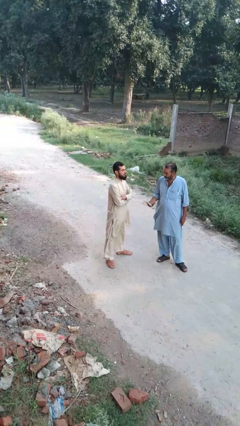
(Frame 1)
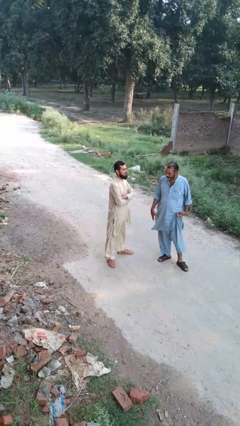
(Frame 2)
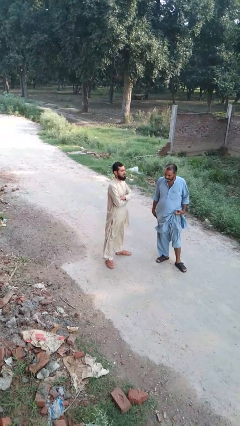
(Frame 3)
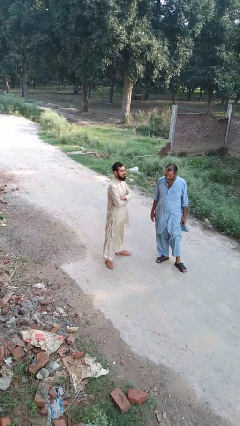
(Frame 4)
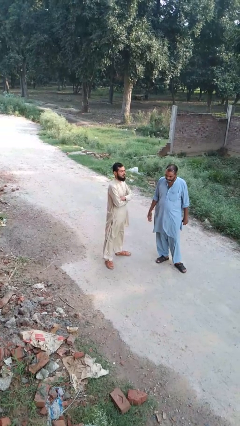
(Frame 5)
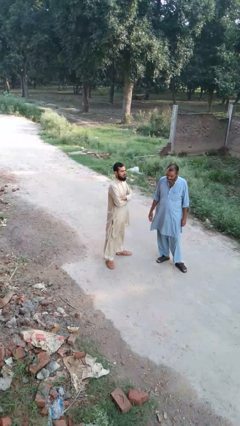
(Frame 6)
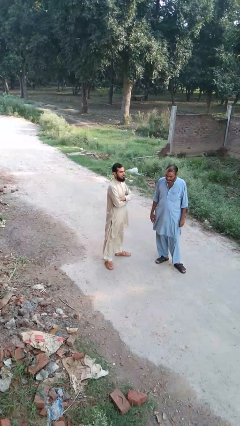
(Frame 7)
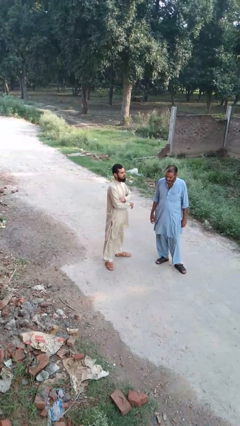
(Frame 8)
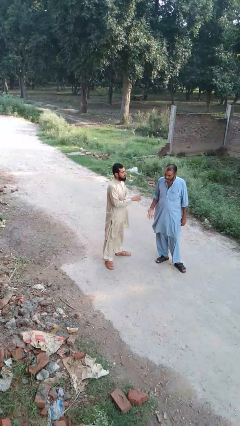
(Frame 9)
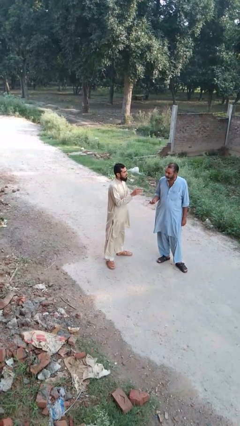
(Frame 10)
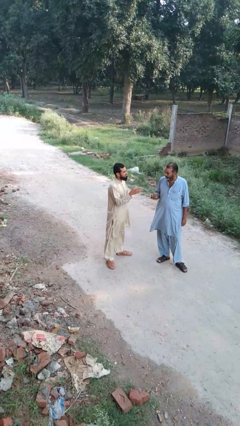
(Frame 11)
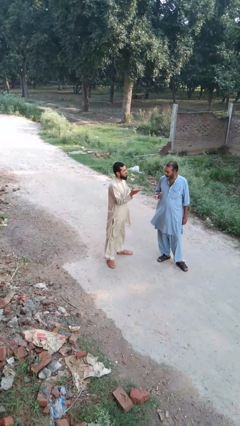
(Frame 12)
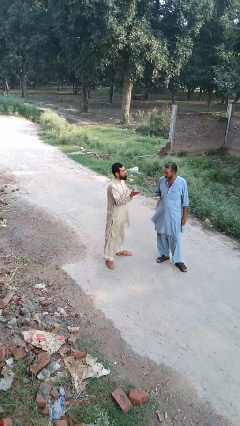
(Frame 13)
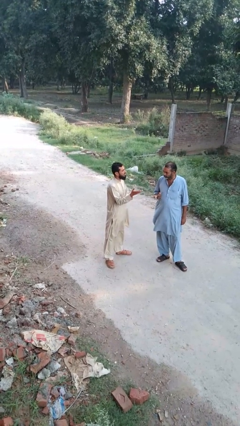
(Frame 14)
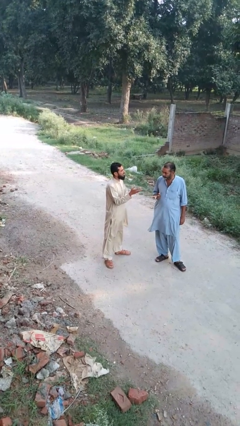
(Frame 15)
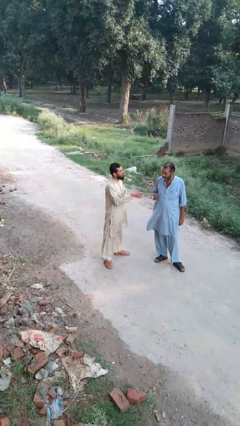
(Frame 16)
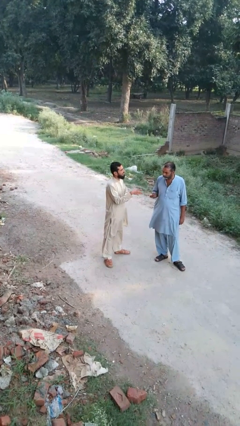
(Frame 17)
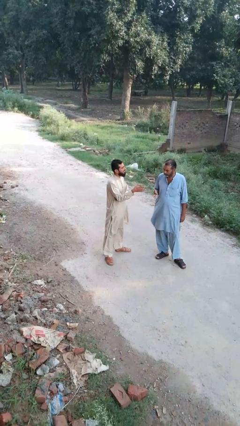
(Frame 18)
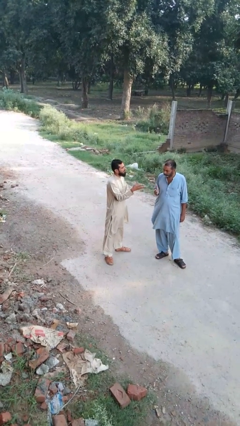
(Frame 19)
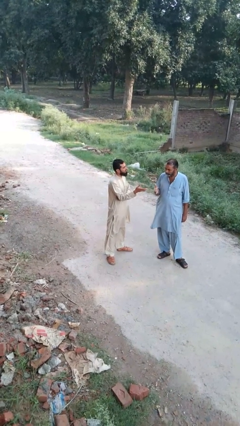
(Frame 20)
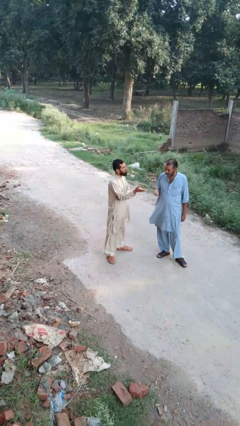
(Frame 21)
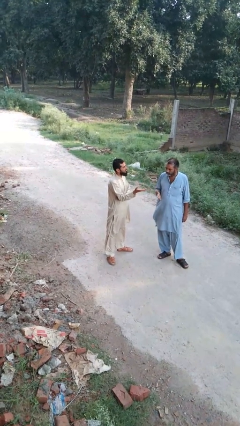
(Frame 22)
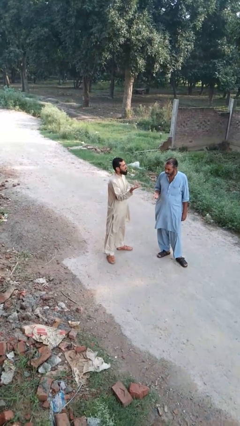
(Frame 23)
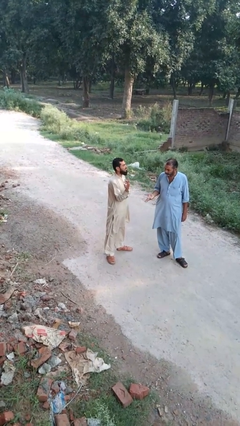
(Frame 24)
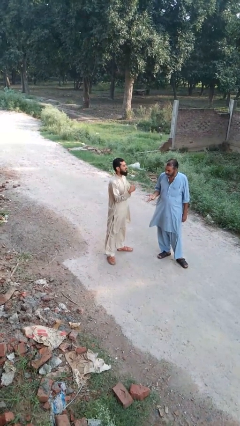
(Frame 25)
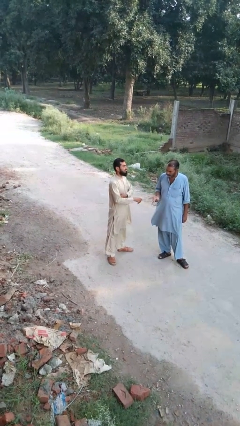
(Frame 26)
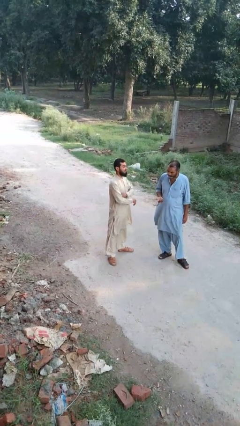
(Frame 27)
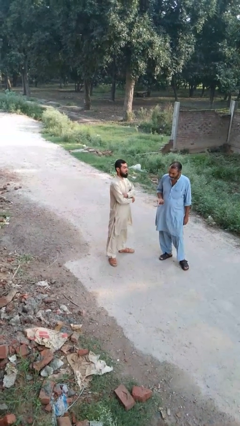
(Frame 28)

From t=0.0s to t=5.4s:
person talks to person

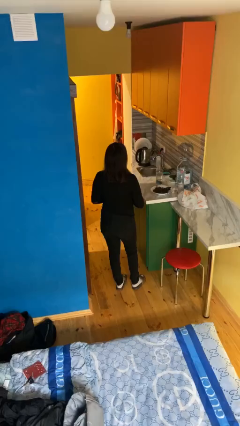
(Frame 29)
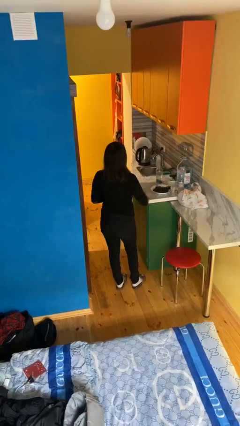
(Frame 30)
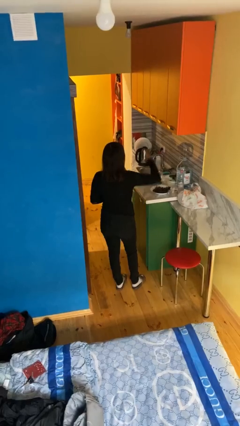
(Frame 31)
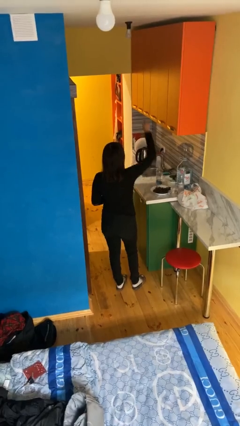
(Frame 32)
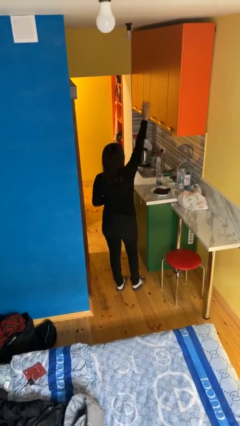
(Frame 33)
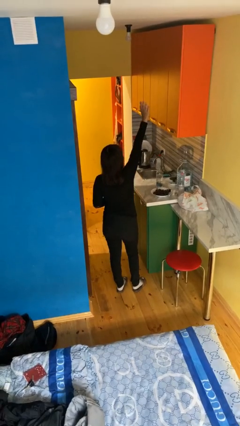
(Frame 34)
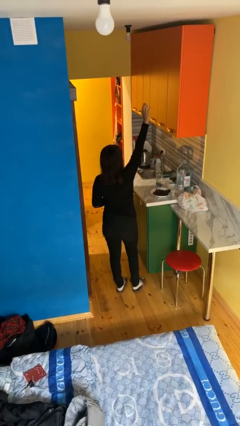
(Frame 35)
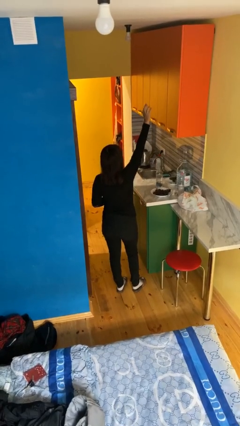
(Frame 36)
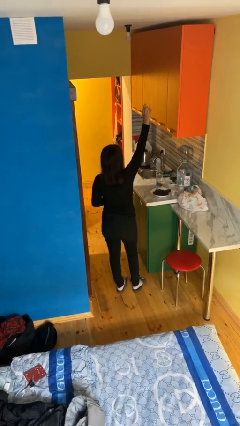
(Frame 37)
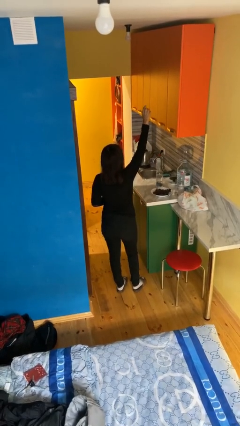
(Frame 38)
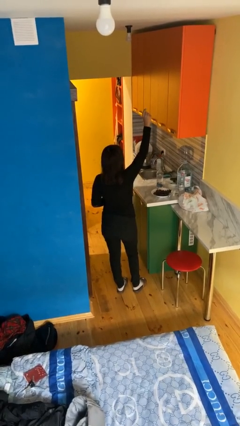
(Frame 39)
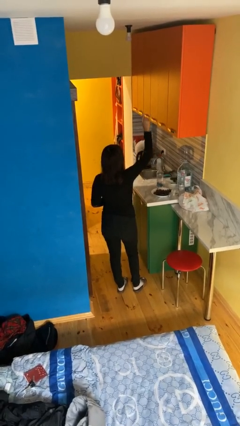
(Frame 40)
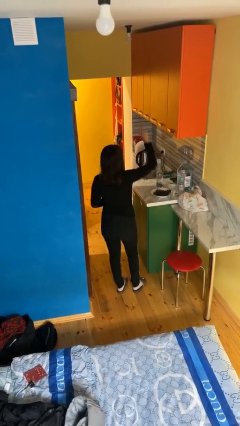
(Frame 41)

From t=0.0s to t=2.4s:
person gestures raise hand

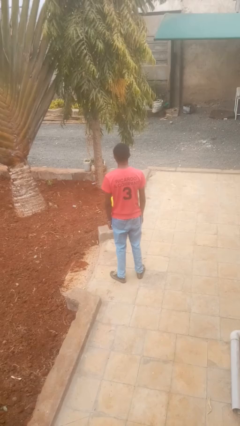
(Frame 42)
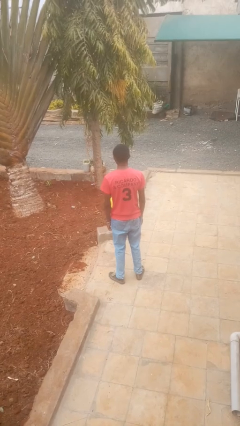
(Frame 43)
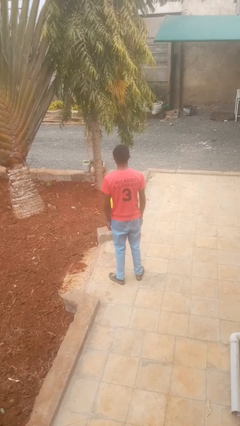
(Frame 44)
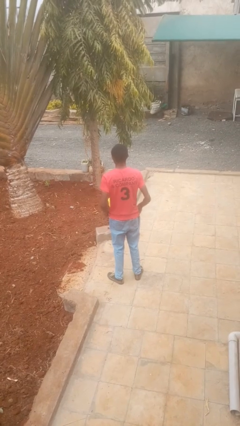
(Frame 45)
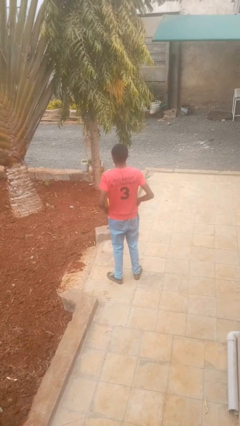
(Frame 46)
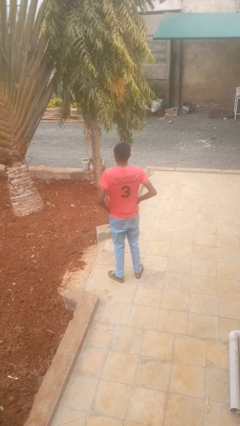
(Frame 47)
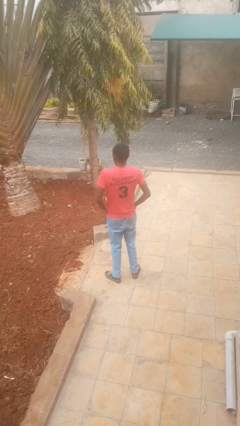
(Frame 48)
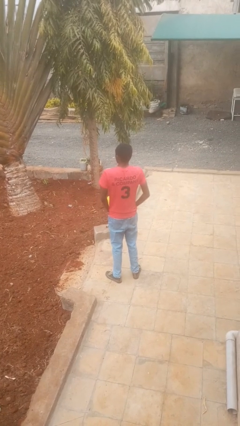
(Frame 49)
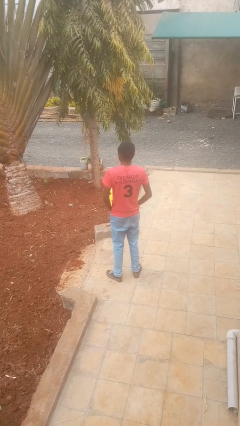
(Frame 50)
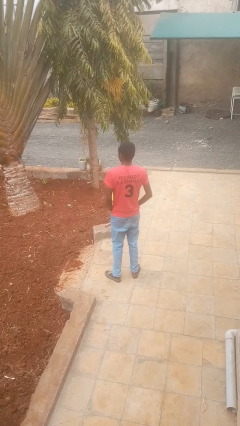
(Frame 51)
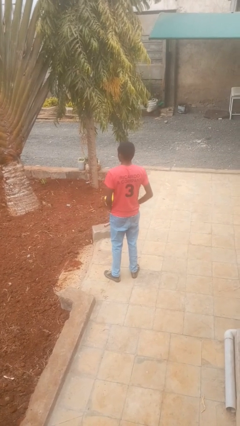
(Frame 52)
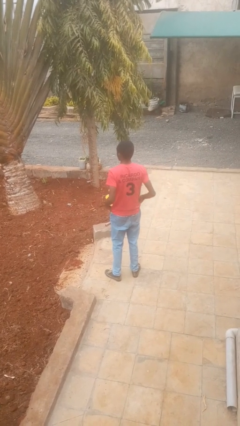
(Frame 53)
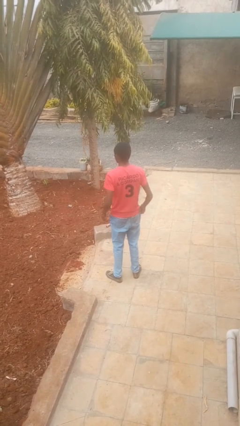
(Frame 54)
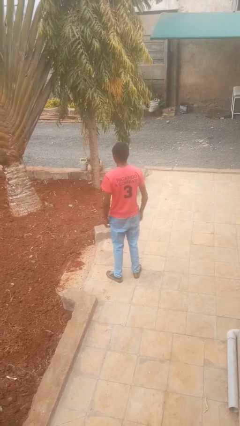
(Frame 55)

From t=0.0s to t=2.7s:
person puts hands in back pockets

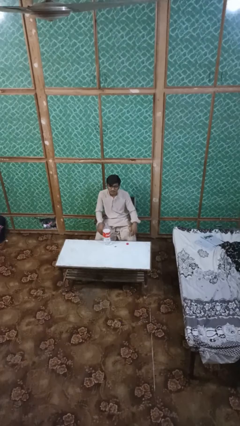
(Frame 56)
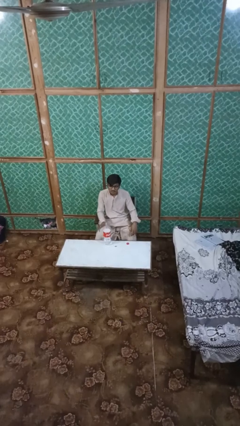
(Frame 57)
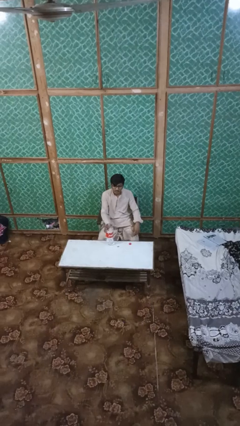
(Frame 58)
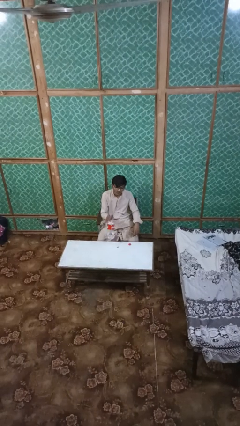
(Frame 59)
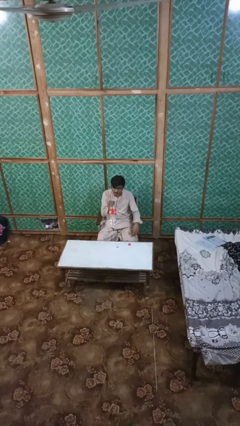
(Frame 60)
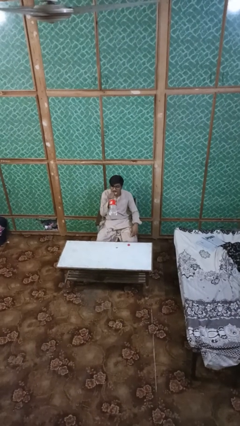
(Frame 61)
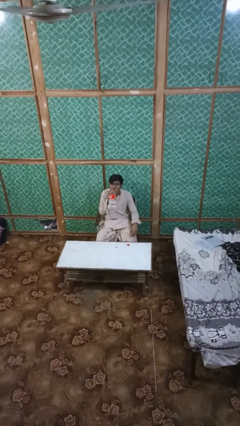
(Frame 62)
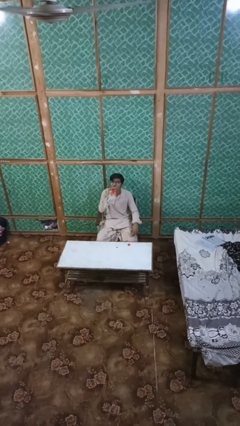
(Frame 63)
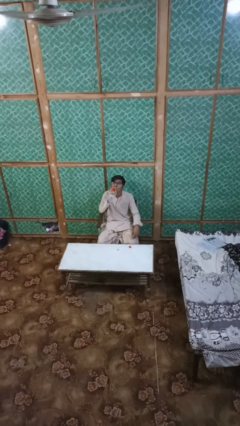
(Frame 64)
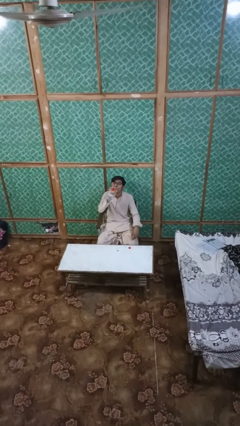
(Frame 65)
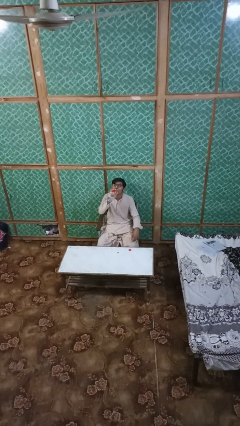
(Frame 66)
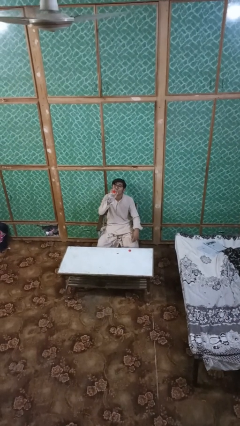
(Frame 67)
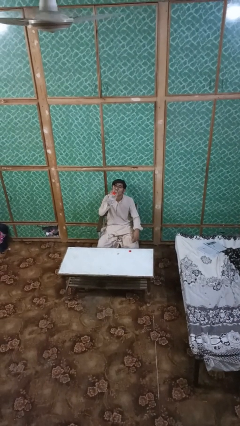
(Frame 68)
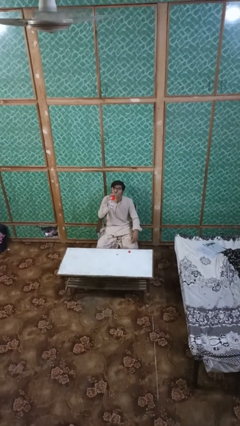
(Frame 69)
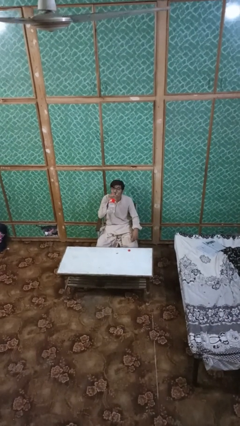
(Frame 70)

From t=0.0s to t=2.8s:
person drinks from bottle

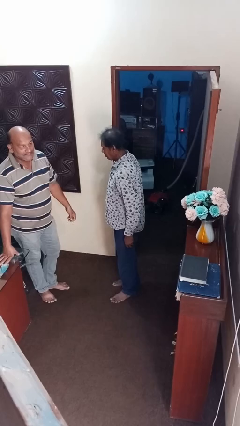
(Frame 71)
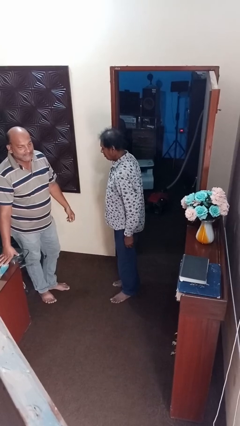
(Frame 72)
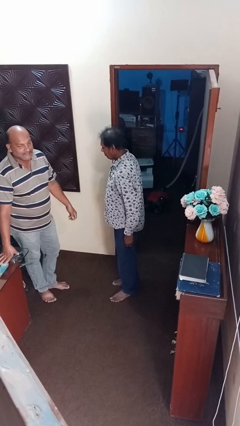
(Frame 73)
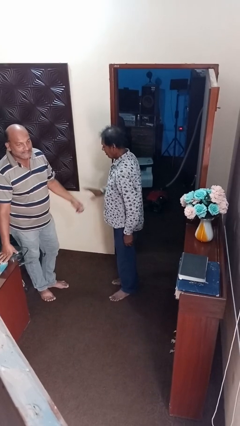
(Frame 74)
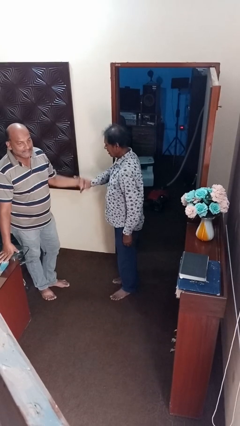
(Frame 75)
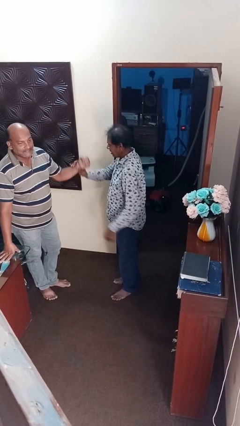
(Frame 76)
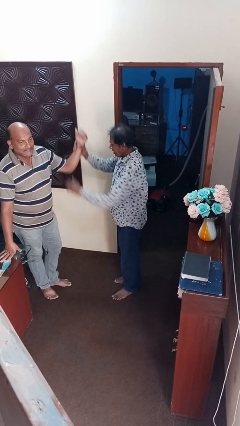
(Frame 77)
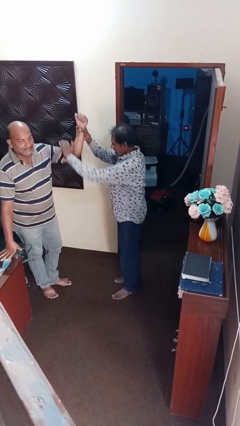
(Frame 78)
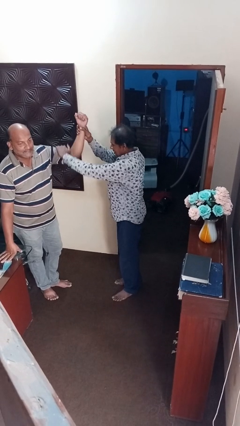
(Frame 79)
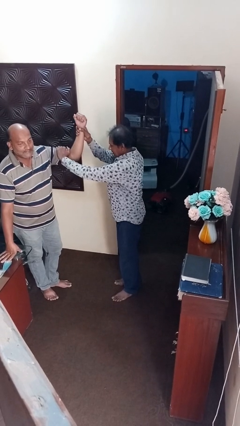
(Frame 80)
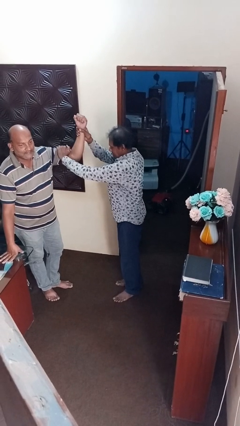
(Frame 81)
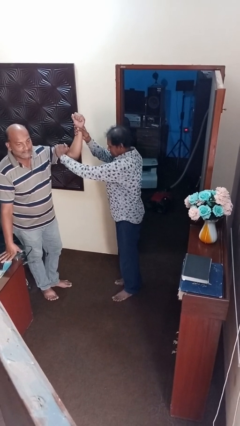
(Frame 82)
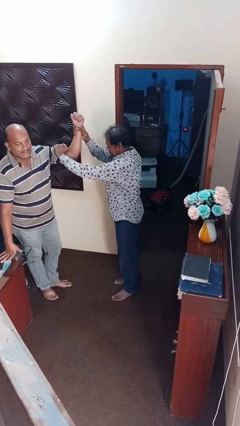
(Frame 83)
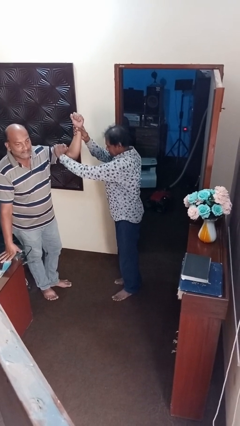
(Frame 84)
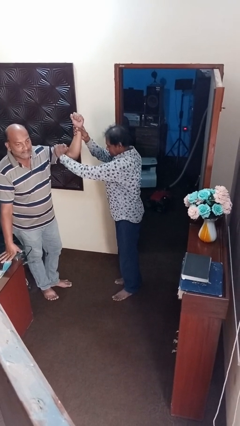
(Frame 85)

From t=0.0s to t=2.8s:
person grabs person by bicep

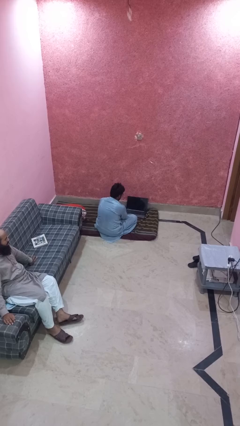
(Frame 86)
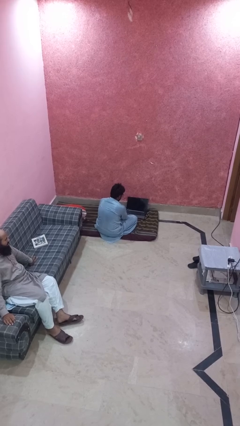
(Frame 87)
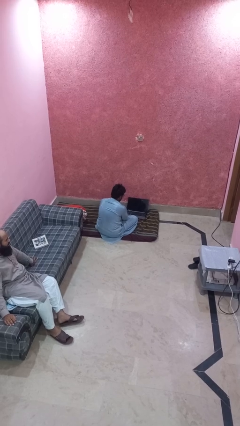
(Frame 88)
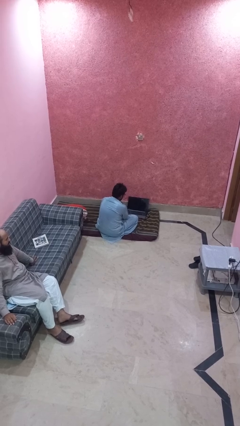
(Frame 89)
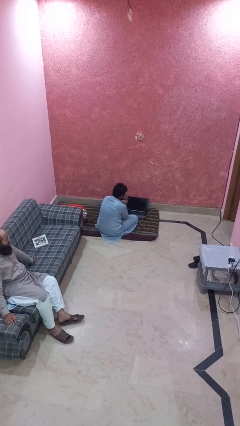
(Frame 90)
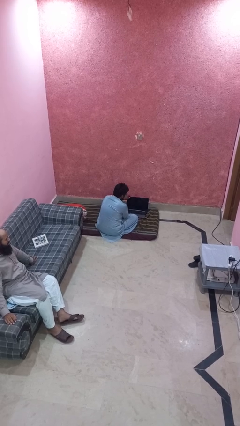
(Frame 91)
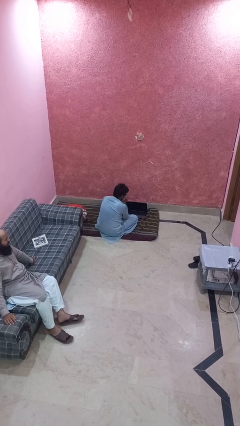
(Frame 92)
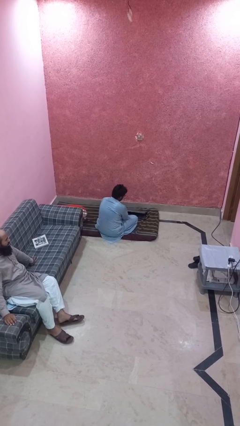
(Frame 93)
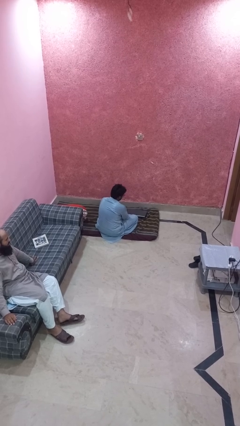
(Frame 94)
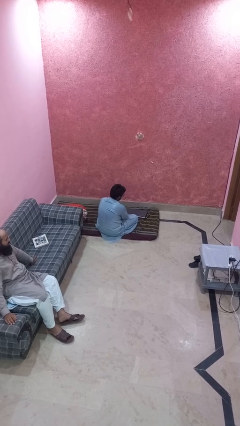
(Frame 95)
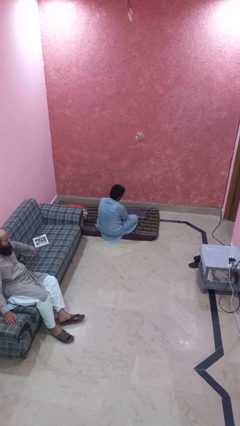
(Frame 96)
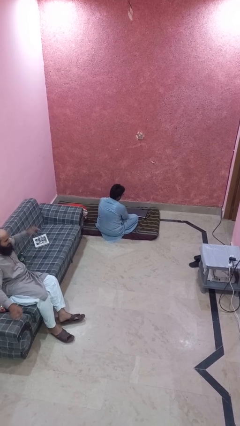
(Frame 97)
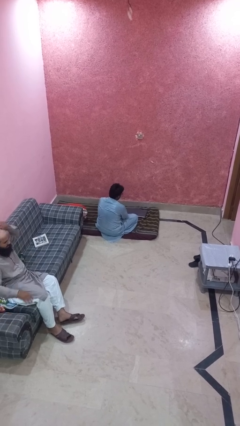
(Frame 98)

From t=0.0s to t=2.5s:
person closes laptop
